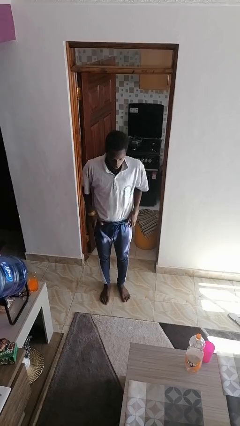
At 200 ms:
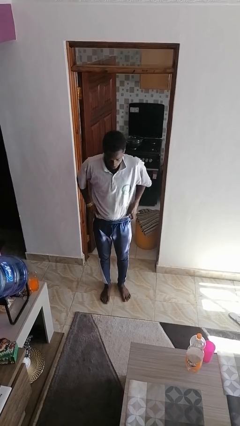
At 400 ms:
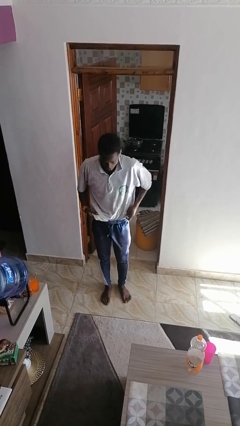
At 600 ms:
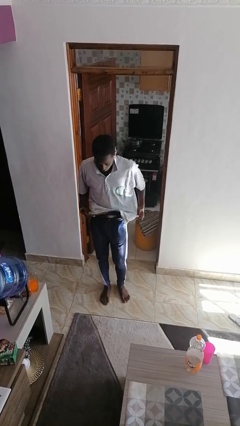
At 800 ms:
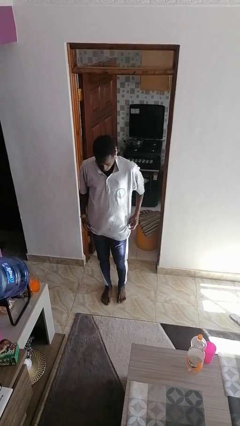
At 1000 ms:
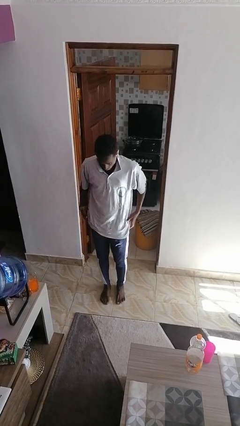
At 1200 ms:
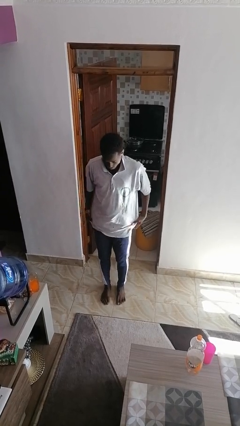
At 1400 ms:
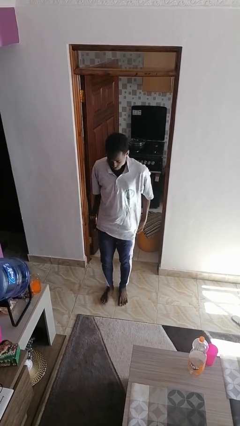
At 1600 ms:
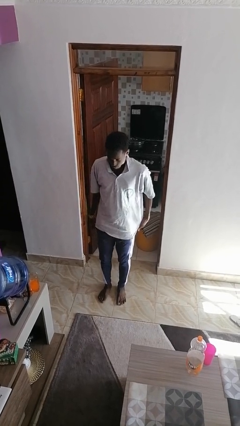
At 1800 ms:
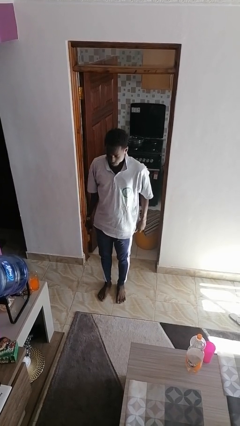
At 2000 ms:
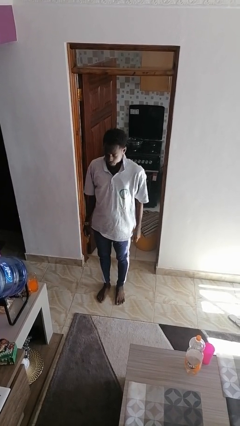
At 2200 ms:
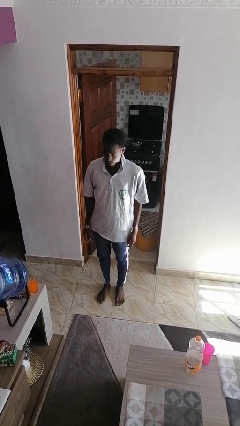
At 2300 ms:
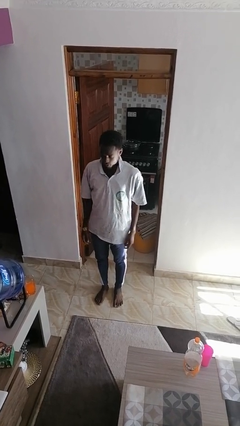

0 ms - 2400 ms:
person untucks shirt

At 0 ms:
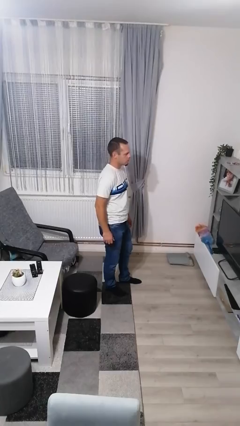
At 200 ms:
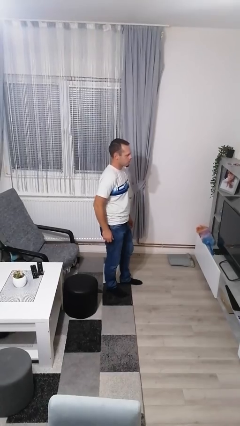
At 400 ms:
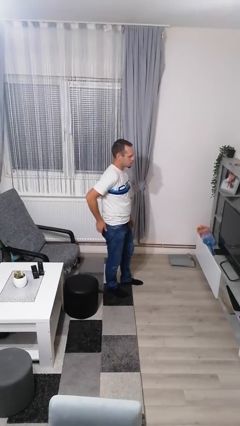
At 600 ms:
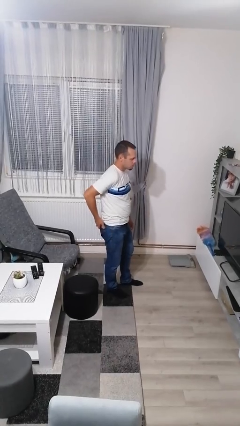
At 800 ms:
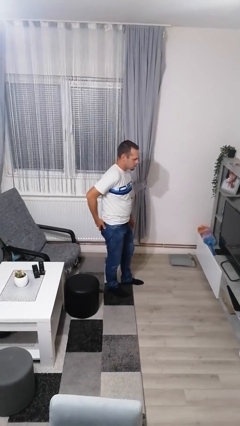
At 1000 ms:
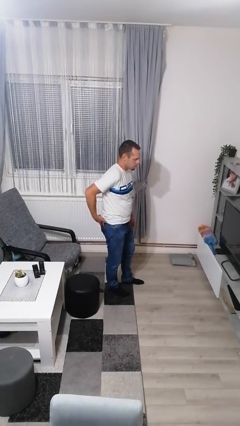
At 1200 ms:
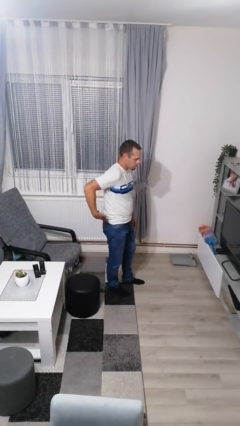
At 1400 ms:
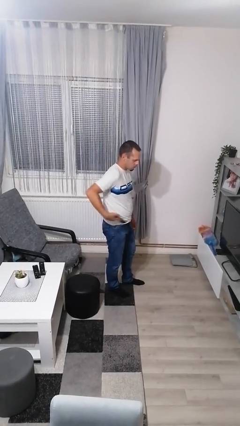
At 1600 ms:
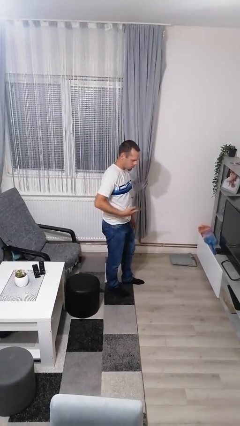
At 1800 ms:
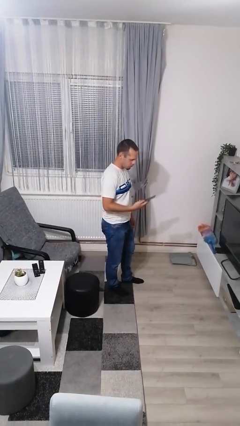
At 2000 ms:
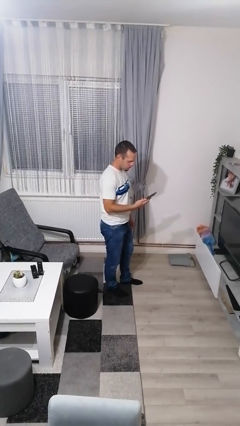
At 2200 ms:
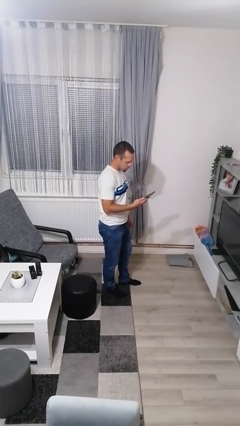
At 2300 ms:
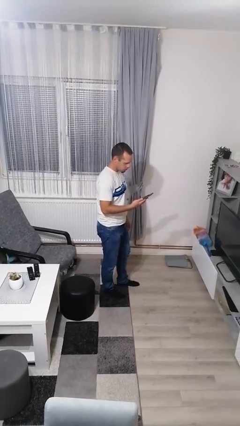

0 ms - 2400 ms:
person takes phone from pocket

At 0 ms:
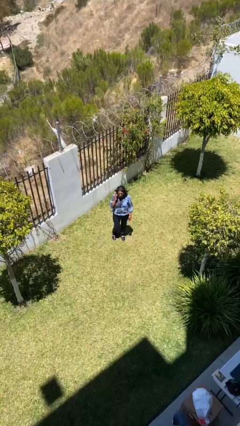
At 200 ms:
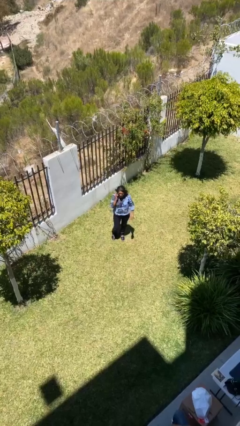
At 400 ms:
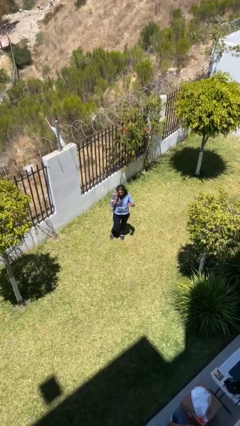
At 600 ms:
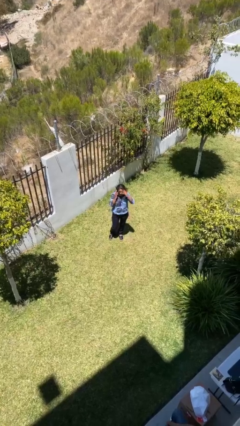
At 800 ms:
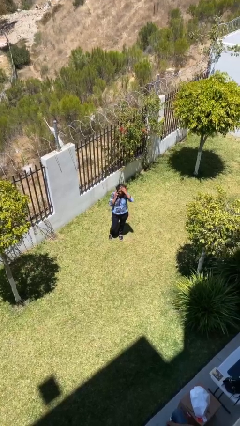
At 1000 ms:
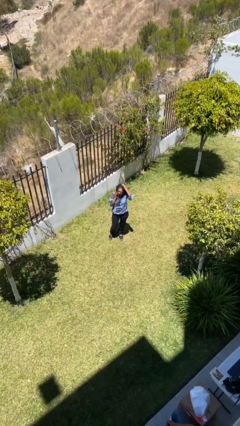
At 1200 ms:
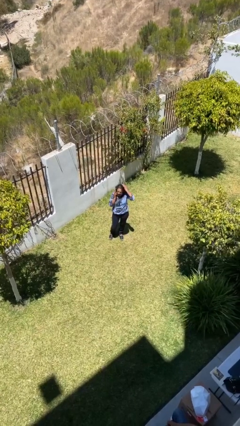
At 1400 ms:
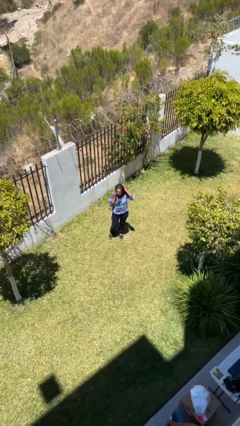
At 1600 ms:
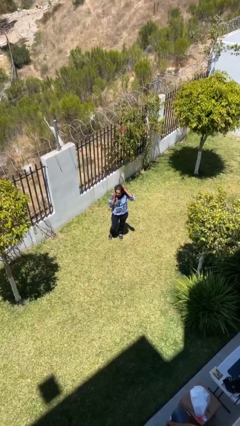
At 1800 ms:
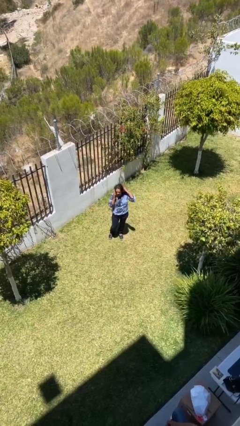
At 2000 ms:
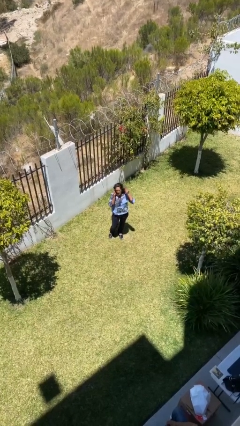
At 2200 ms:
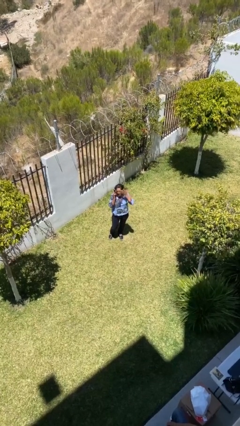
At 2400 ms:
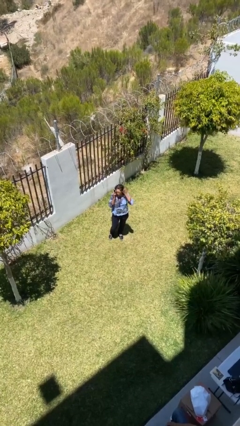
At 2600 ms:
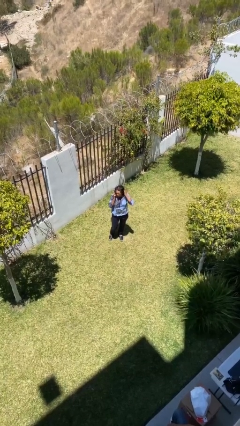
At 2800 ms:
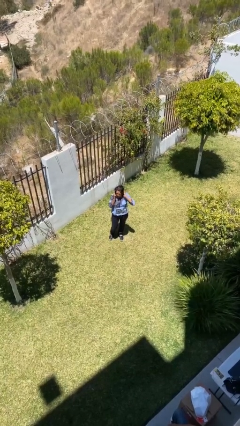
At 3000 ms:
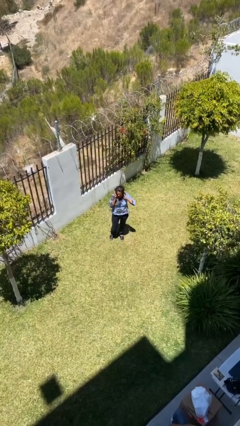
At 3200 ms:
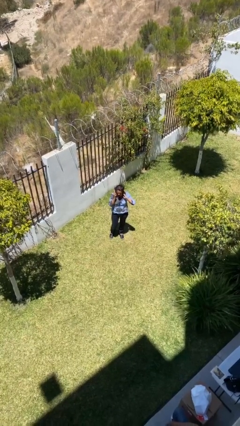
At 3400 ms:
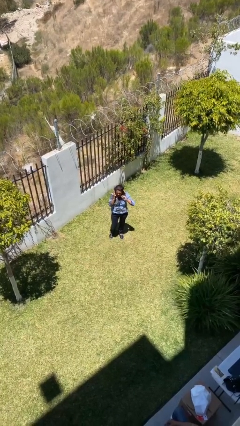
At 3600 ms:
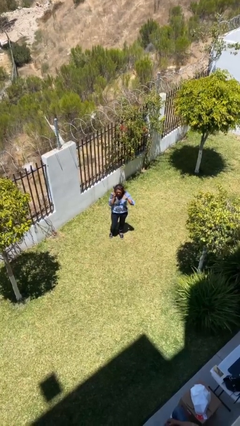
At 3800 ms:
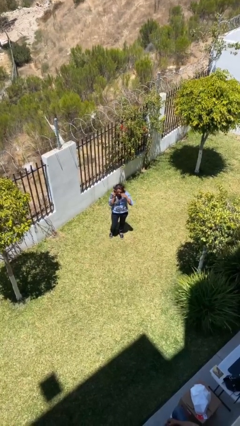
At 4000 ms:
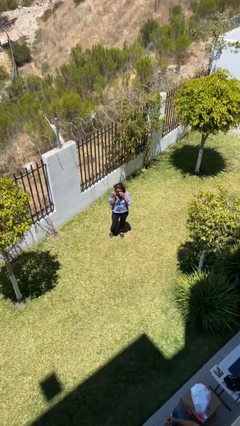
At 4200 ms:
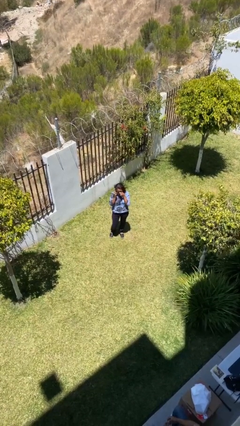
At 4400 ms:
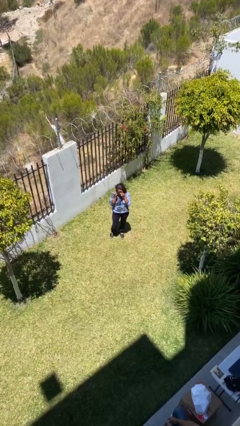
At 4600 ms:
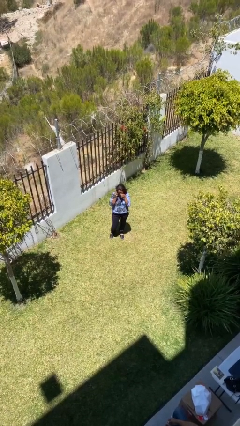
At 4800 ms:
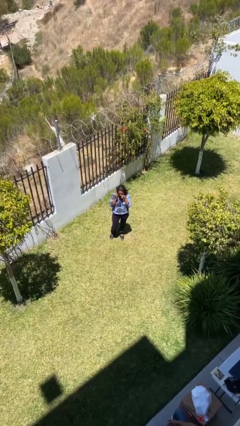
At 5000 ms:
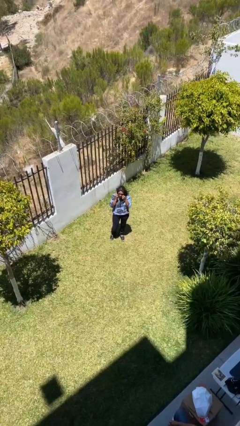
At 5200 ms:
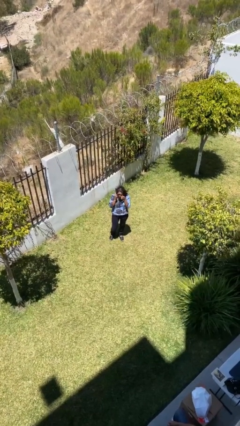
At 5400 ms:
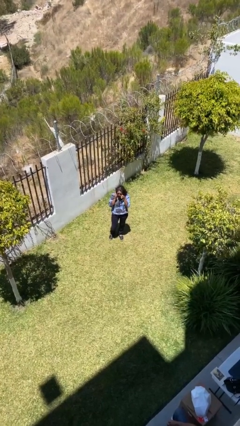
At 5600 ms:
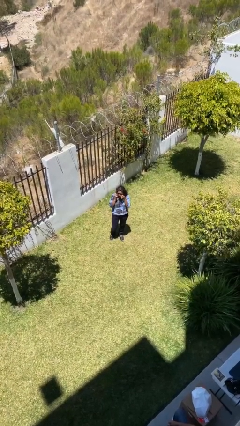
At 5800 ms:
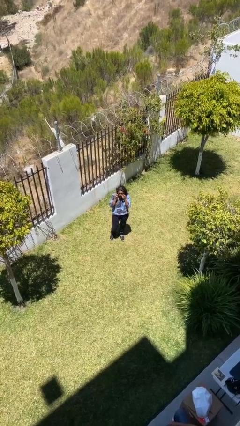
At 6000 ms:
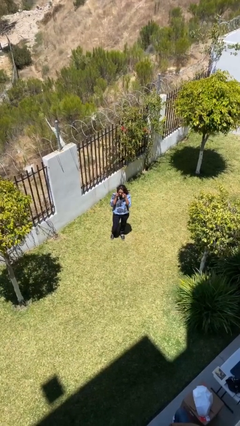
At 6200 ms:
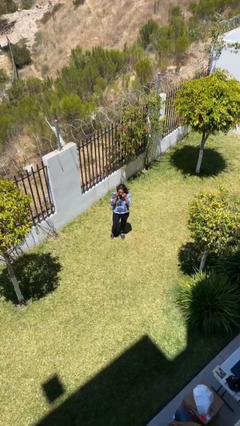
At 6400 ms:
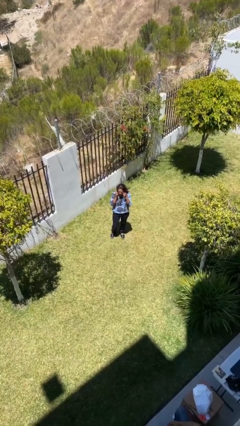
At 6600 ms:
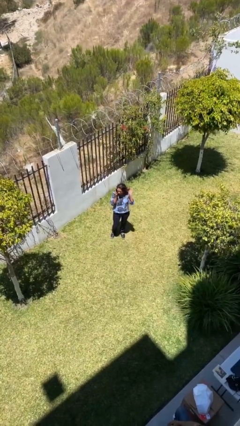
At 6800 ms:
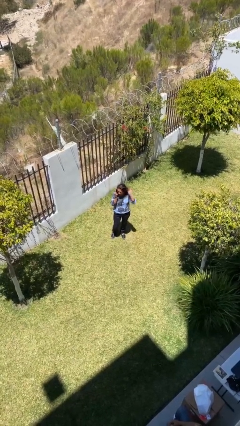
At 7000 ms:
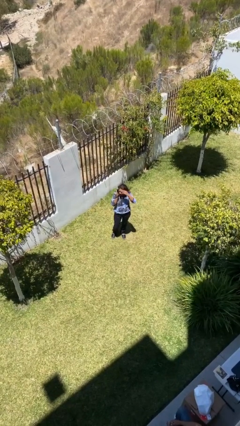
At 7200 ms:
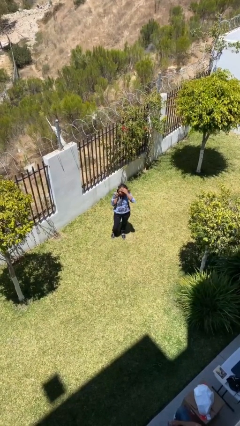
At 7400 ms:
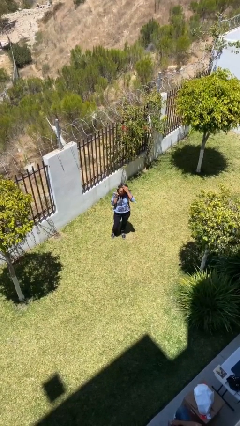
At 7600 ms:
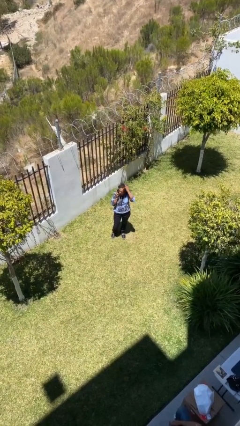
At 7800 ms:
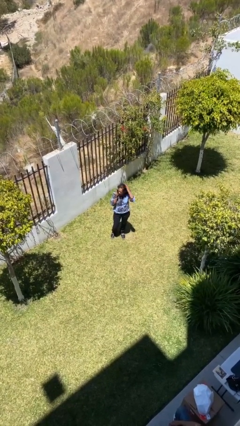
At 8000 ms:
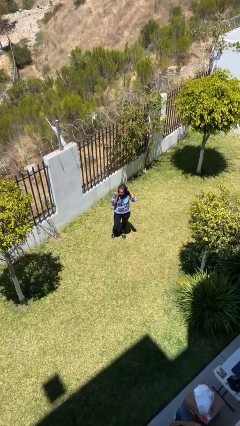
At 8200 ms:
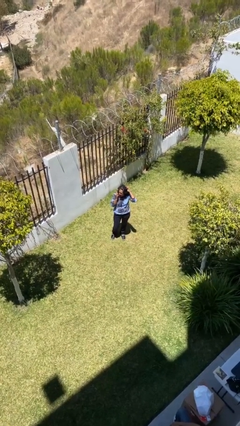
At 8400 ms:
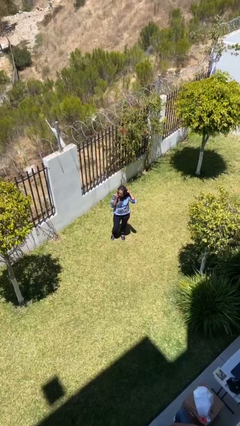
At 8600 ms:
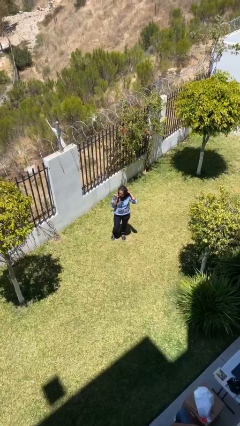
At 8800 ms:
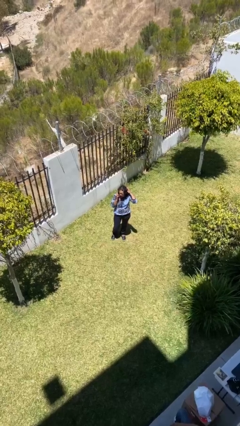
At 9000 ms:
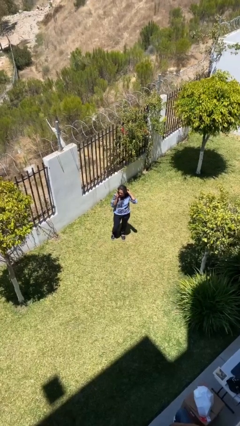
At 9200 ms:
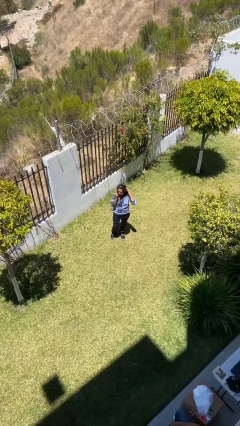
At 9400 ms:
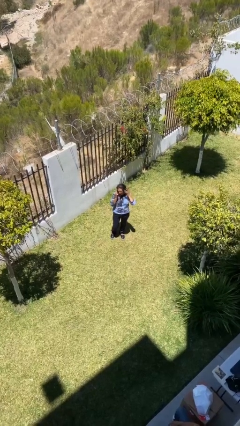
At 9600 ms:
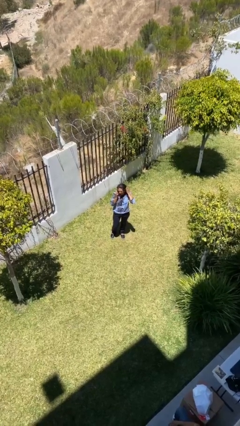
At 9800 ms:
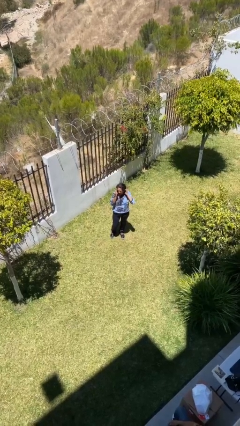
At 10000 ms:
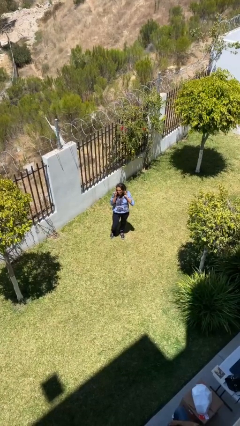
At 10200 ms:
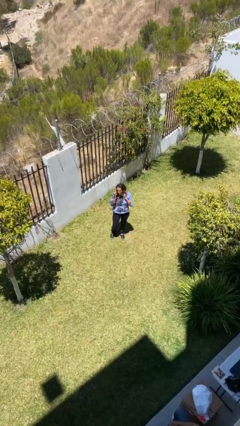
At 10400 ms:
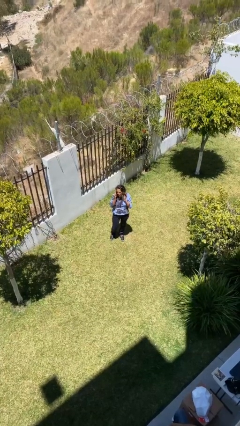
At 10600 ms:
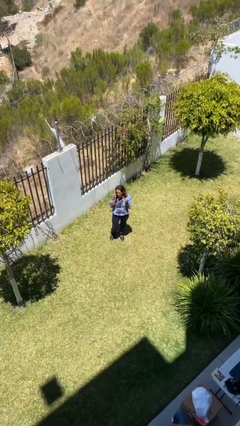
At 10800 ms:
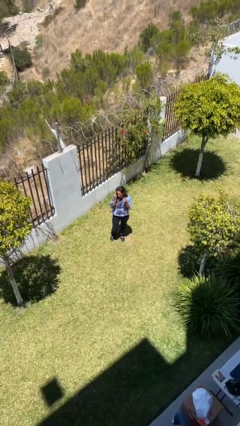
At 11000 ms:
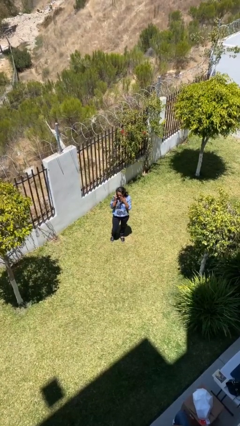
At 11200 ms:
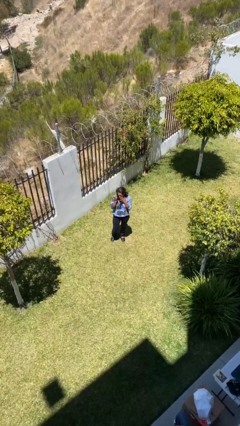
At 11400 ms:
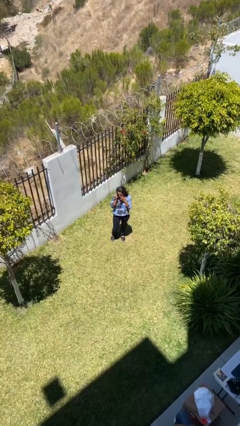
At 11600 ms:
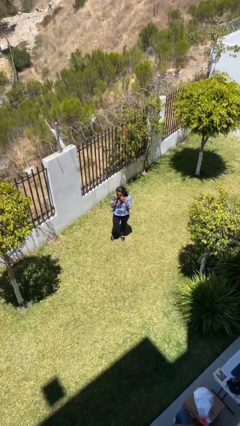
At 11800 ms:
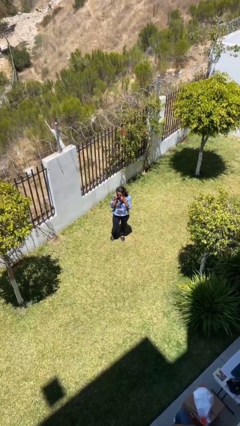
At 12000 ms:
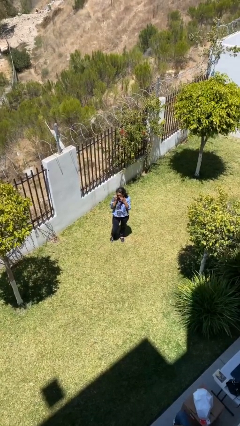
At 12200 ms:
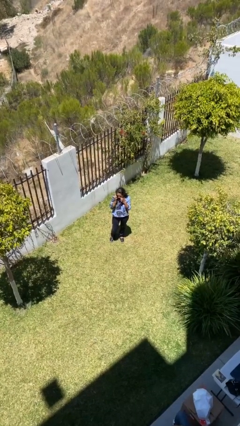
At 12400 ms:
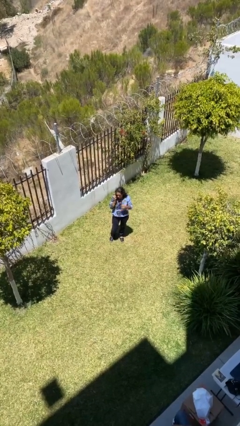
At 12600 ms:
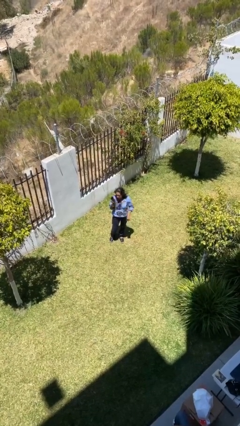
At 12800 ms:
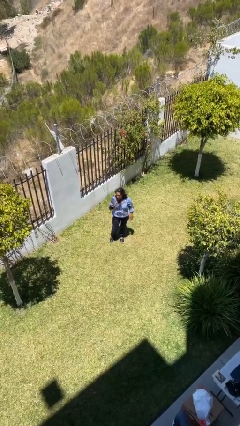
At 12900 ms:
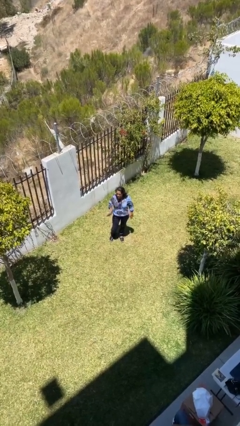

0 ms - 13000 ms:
person talks on phone

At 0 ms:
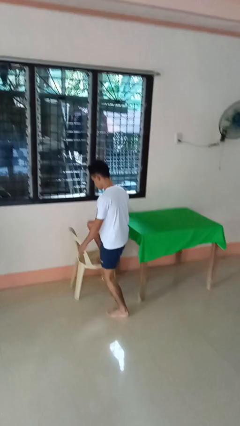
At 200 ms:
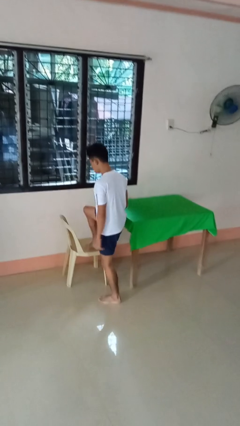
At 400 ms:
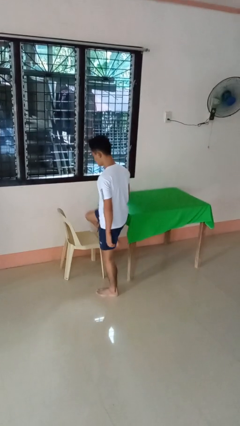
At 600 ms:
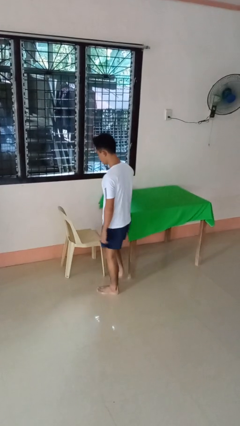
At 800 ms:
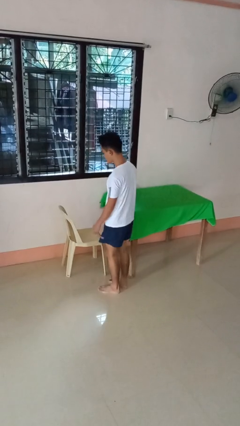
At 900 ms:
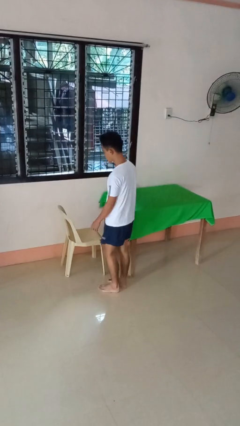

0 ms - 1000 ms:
person climbs off chair
